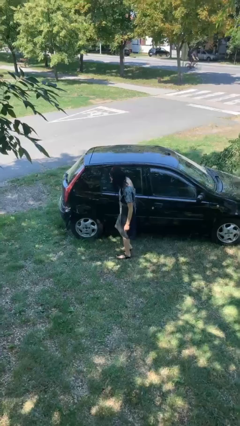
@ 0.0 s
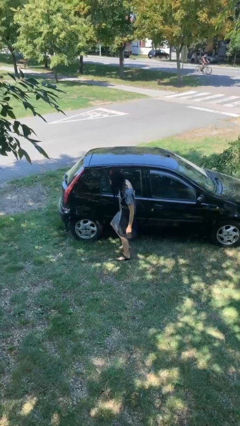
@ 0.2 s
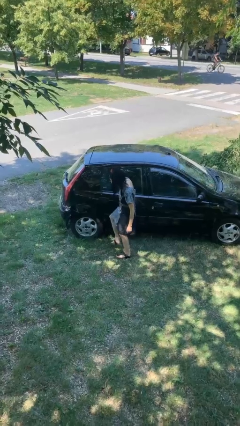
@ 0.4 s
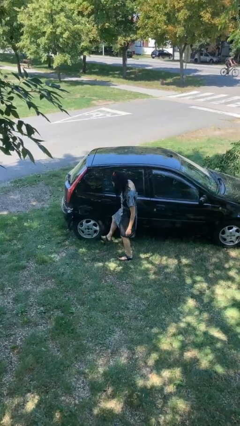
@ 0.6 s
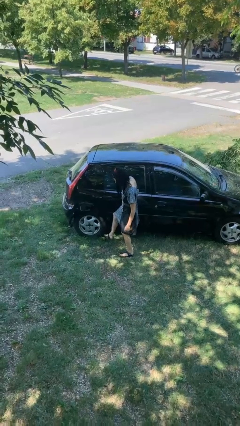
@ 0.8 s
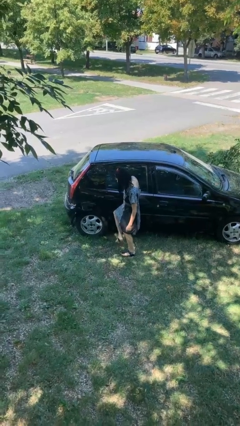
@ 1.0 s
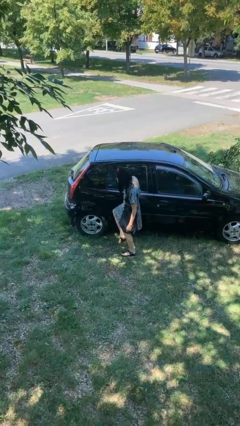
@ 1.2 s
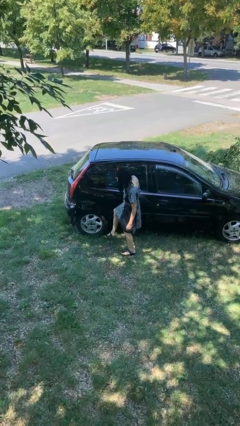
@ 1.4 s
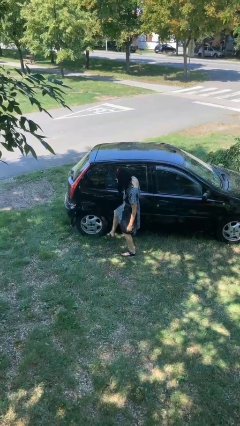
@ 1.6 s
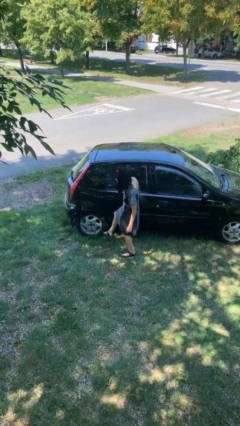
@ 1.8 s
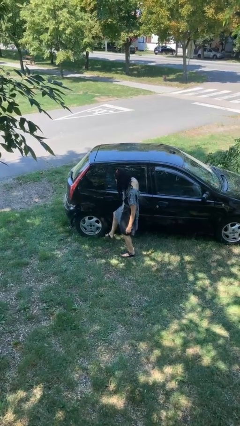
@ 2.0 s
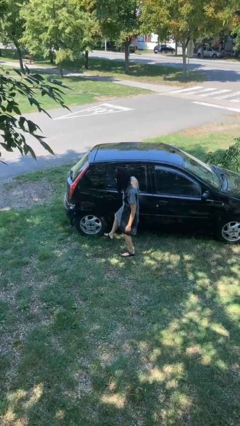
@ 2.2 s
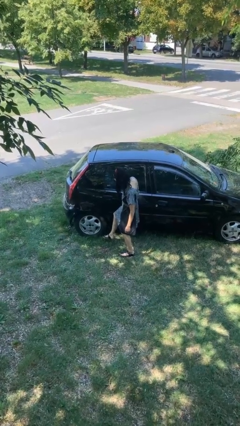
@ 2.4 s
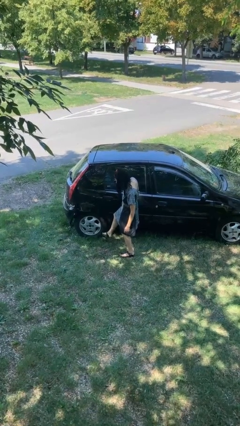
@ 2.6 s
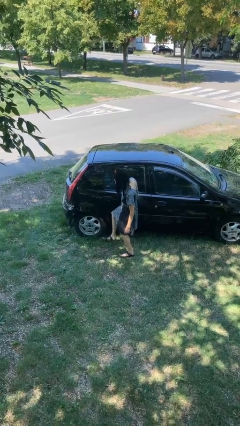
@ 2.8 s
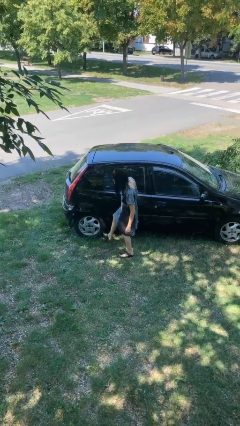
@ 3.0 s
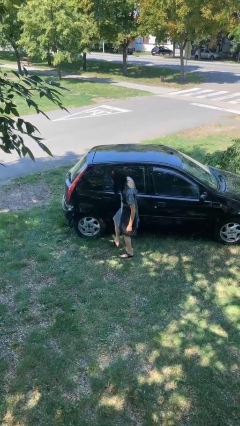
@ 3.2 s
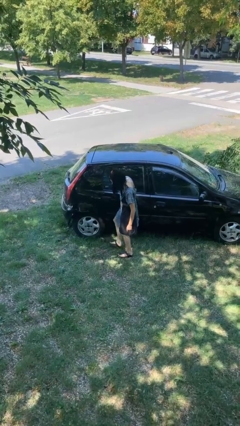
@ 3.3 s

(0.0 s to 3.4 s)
person kicks car tires

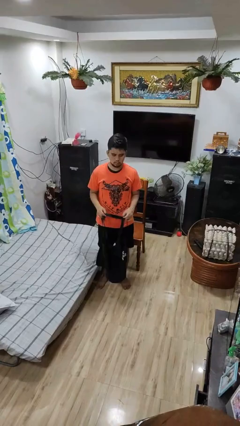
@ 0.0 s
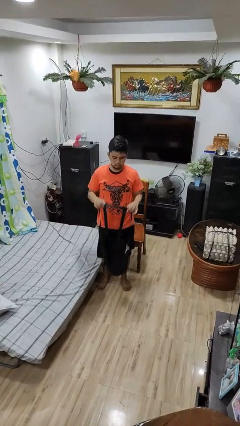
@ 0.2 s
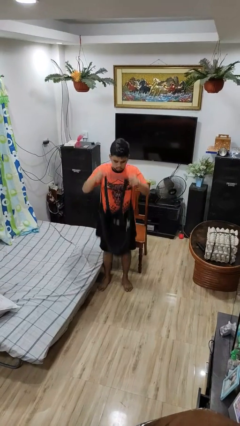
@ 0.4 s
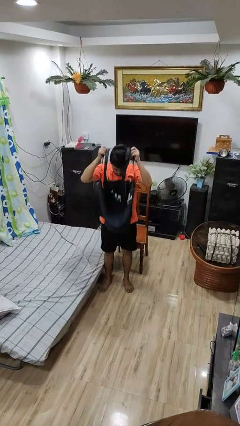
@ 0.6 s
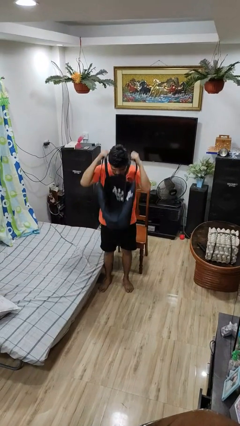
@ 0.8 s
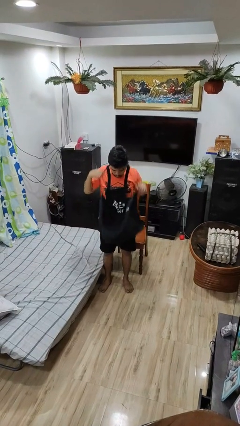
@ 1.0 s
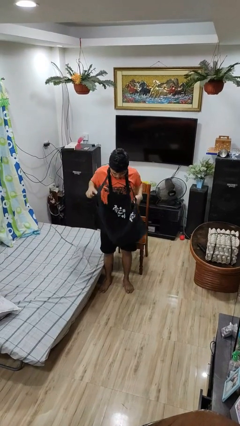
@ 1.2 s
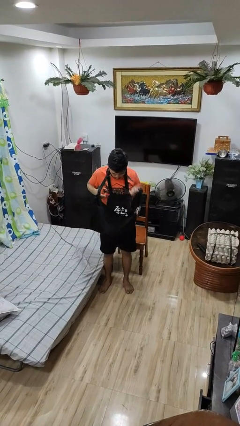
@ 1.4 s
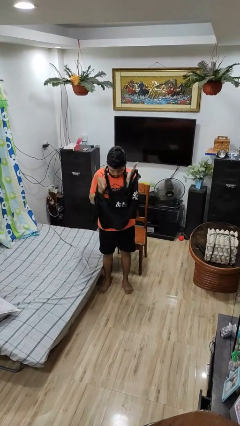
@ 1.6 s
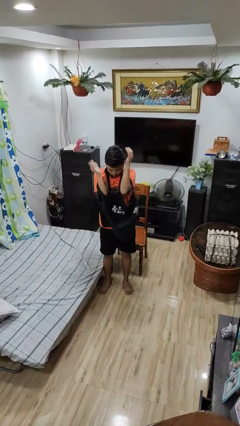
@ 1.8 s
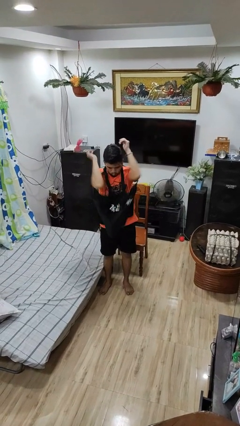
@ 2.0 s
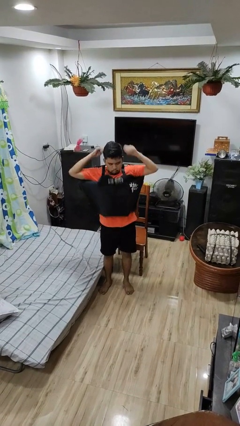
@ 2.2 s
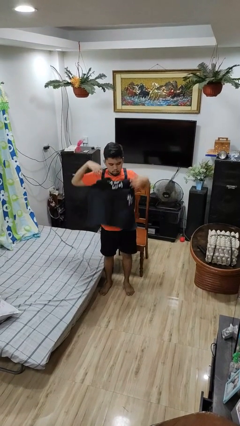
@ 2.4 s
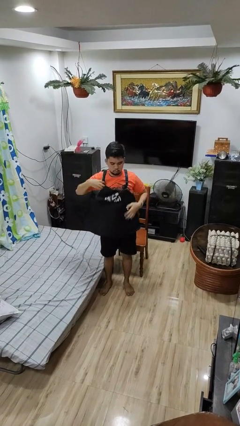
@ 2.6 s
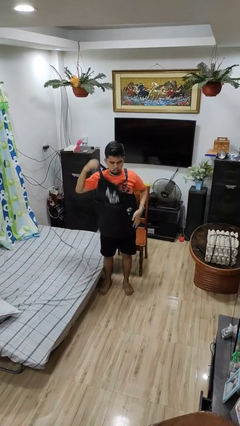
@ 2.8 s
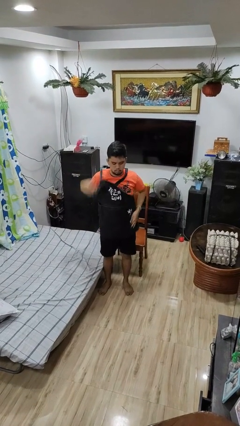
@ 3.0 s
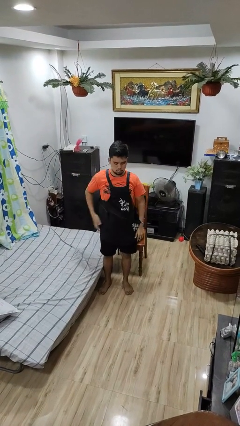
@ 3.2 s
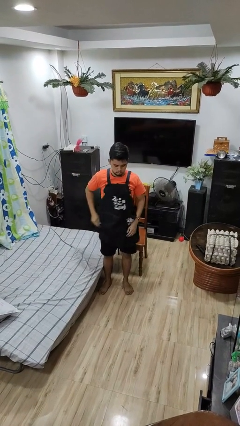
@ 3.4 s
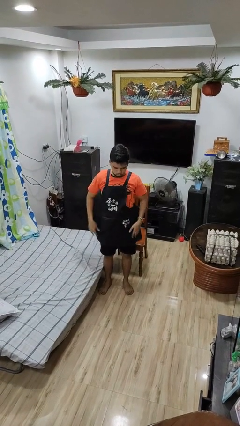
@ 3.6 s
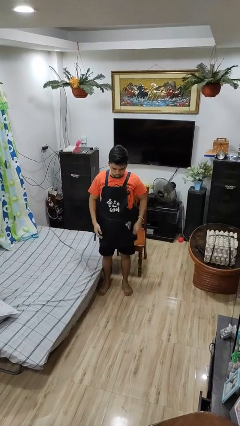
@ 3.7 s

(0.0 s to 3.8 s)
person puts on apron

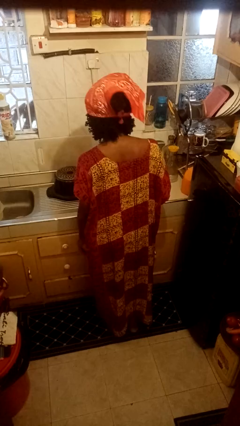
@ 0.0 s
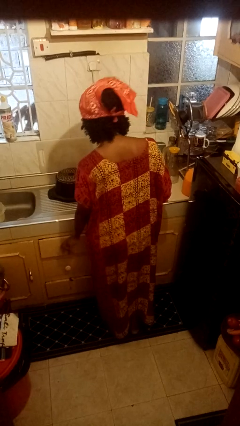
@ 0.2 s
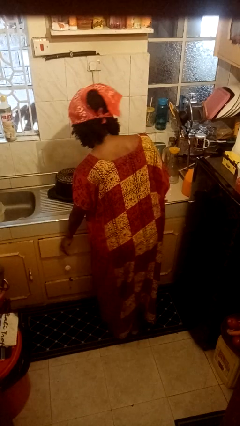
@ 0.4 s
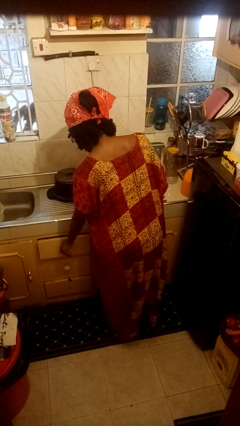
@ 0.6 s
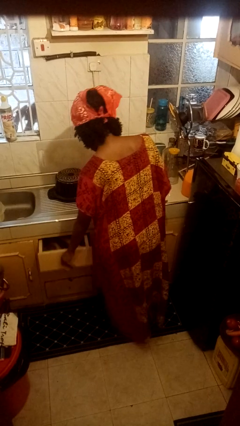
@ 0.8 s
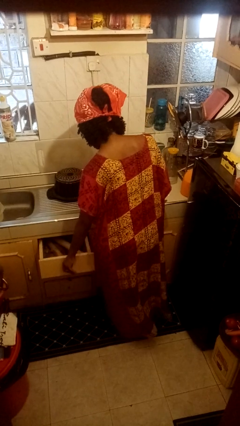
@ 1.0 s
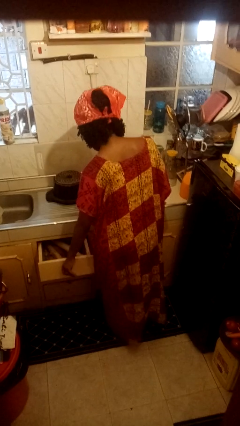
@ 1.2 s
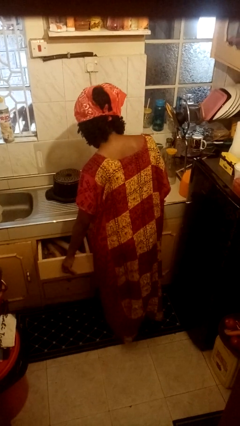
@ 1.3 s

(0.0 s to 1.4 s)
person opens kitchen drawer

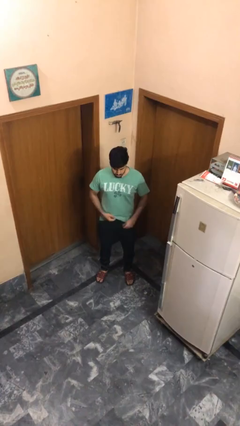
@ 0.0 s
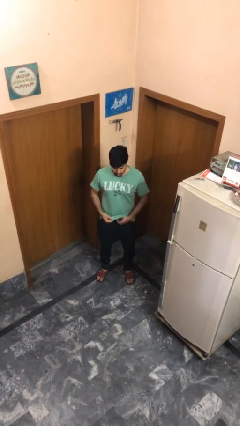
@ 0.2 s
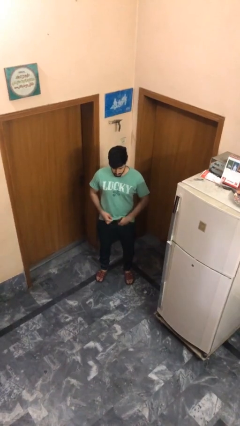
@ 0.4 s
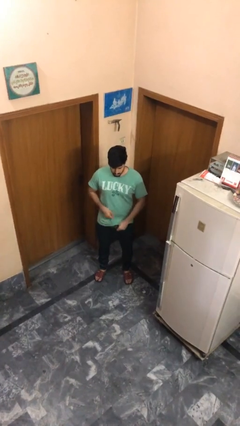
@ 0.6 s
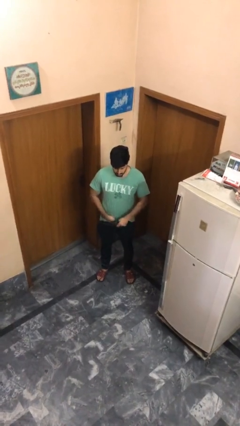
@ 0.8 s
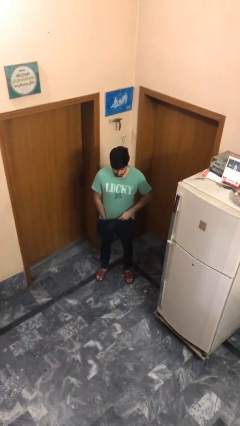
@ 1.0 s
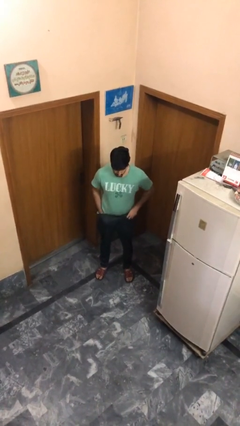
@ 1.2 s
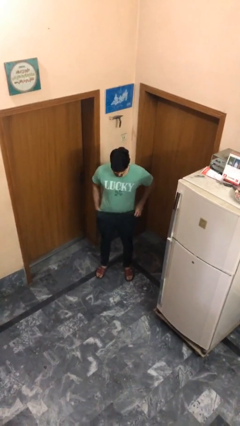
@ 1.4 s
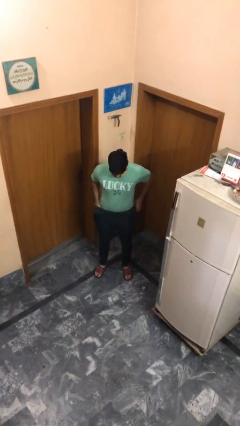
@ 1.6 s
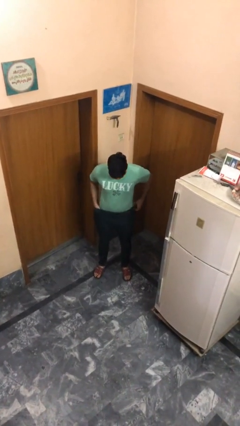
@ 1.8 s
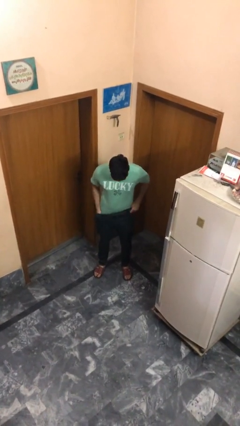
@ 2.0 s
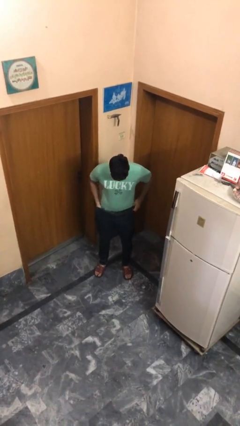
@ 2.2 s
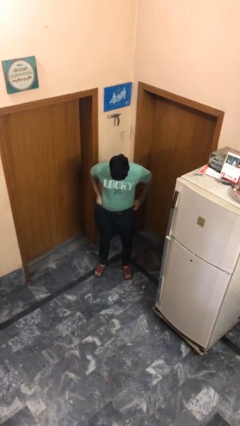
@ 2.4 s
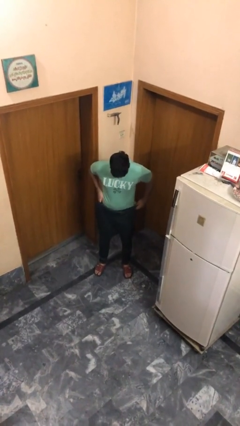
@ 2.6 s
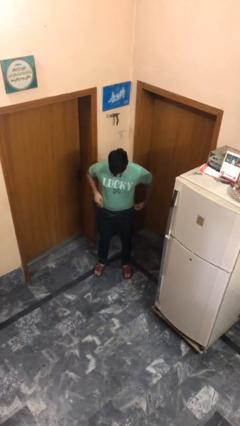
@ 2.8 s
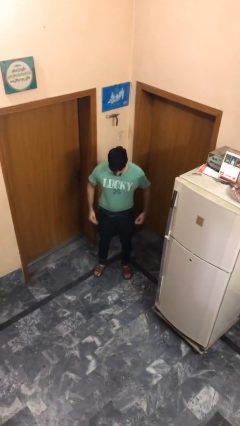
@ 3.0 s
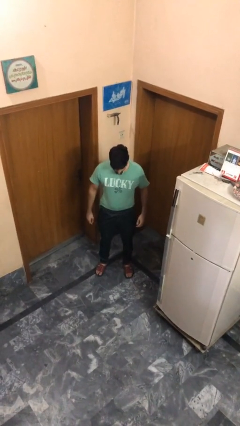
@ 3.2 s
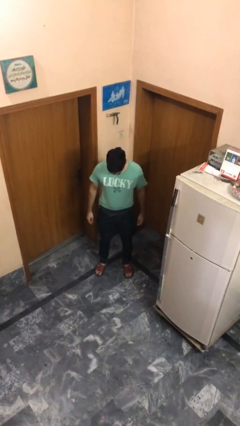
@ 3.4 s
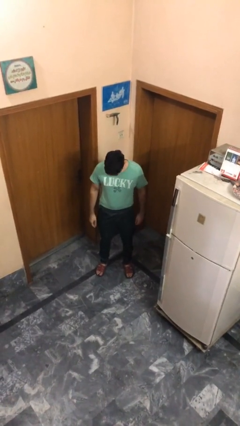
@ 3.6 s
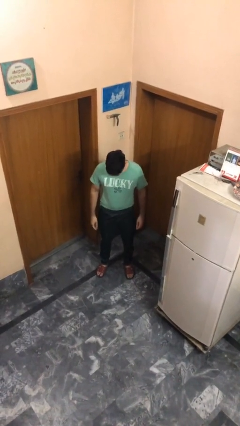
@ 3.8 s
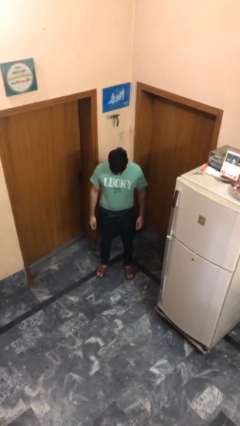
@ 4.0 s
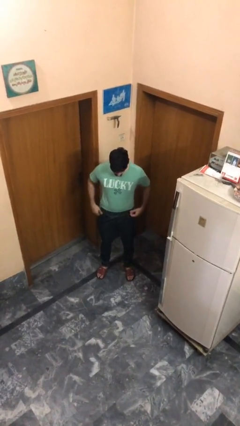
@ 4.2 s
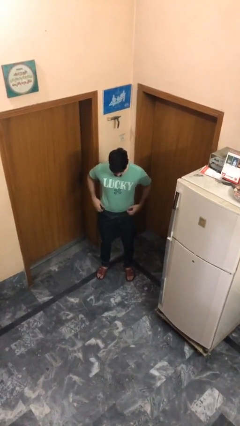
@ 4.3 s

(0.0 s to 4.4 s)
person tucks in shirt

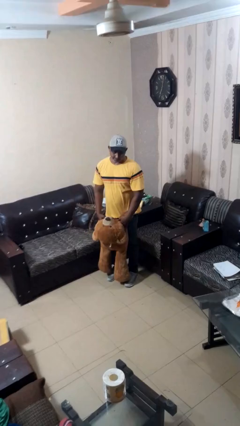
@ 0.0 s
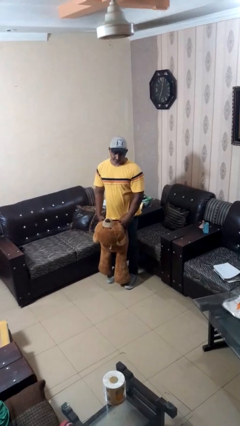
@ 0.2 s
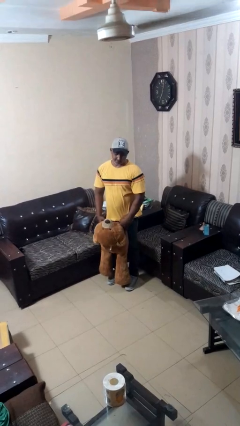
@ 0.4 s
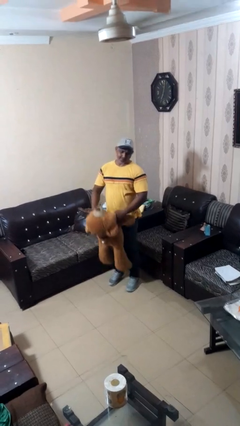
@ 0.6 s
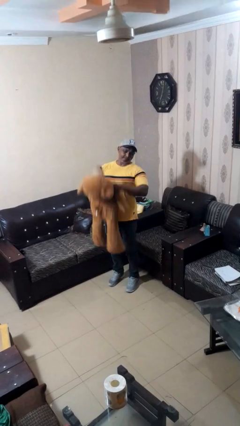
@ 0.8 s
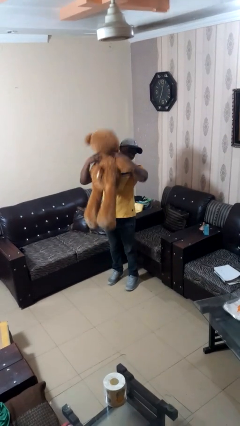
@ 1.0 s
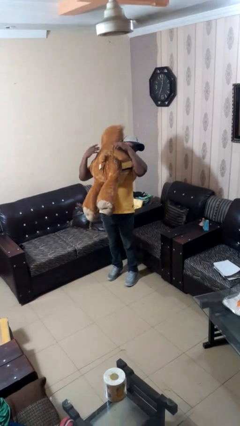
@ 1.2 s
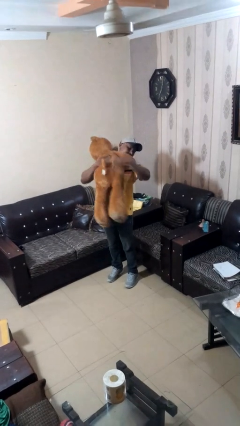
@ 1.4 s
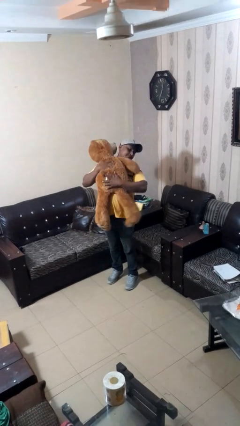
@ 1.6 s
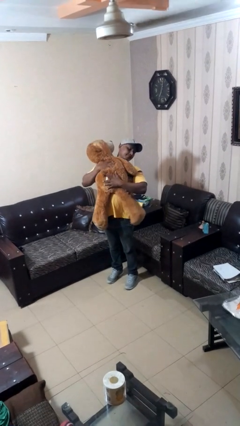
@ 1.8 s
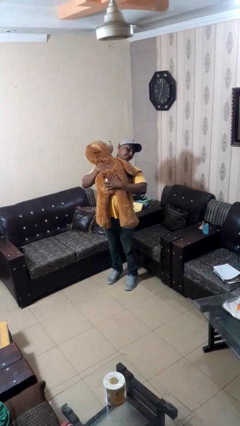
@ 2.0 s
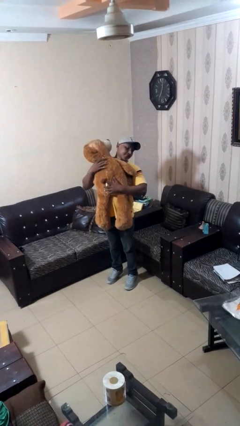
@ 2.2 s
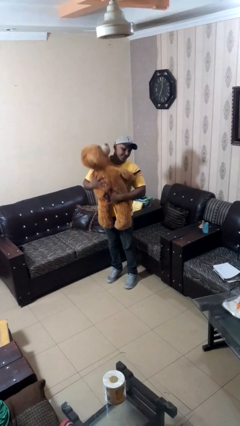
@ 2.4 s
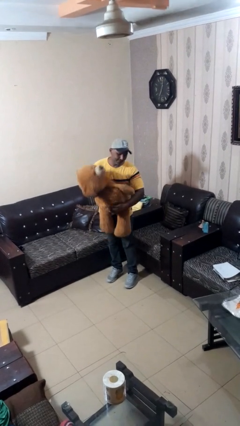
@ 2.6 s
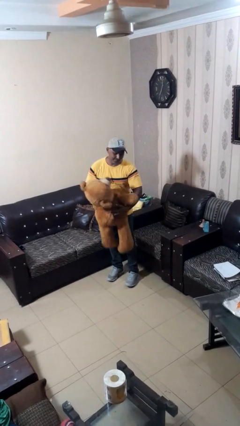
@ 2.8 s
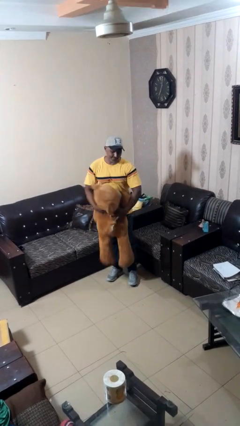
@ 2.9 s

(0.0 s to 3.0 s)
person hugs stuffed animal

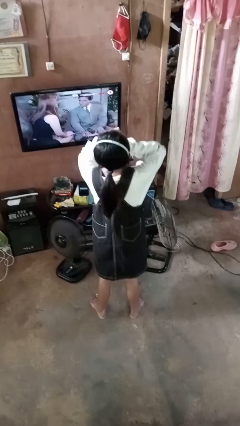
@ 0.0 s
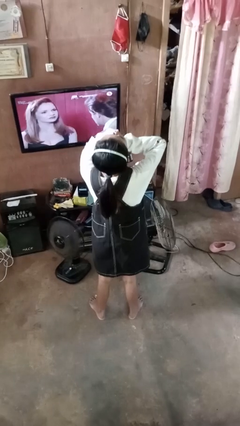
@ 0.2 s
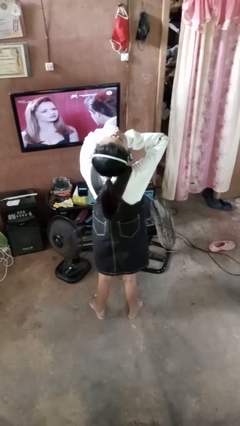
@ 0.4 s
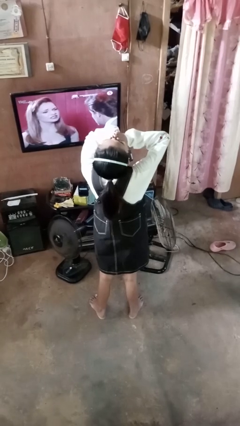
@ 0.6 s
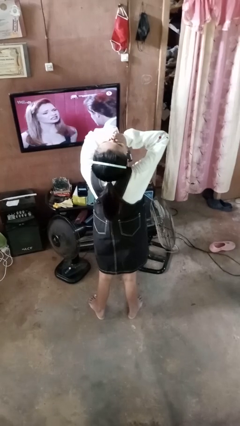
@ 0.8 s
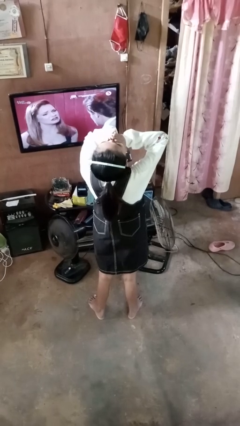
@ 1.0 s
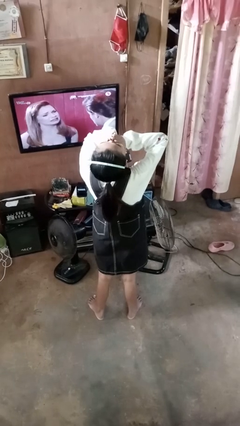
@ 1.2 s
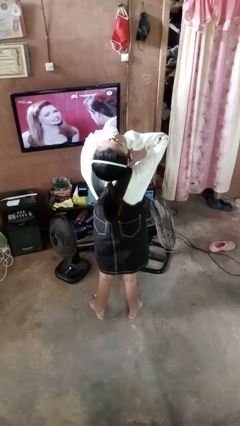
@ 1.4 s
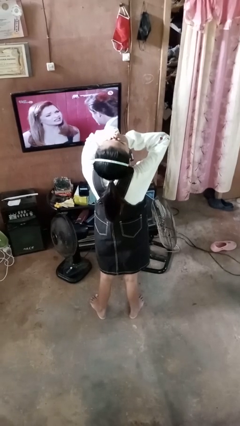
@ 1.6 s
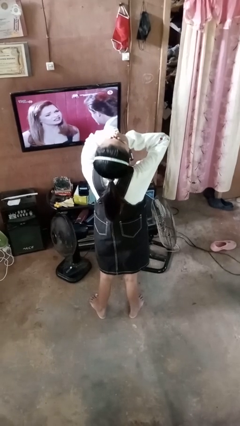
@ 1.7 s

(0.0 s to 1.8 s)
person yawns
